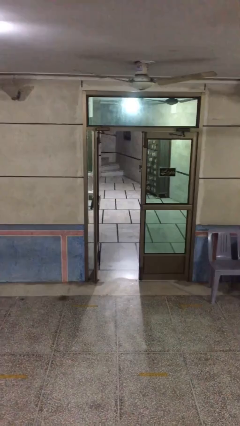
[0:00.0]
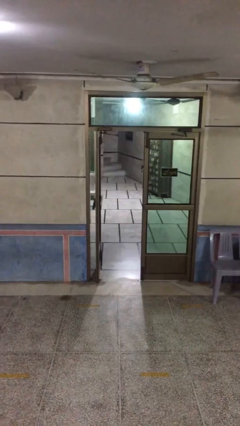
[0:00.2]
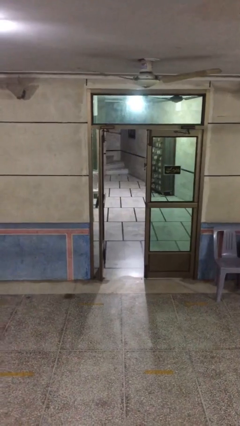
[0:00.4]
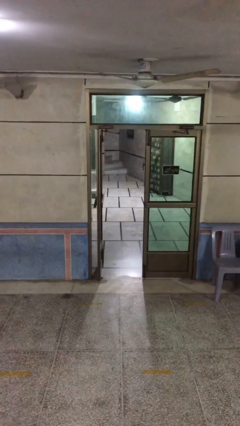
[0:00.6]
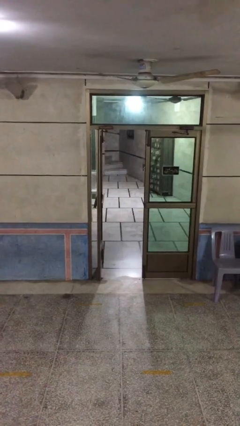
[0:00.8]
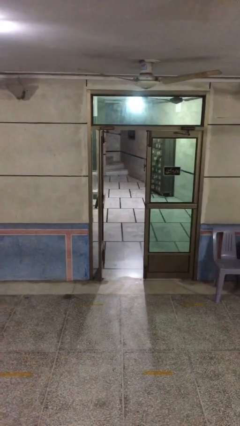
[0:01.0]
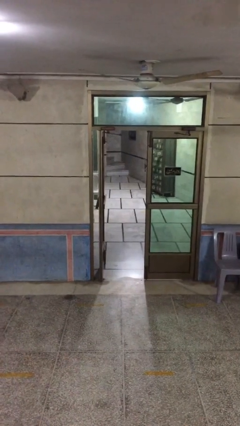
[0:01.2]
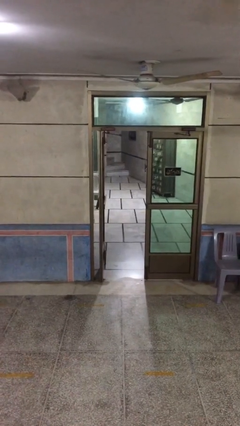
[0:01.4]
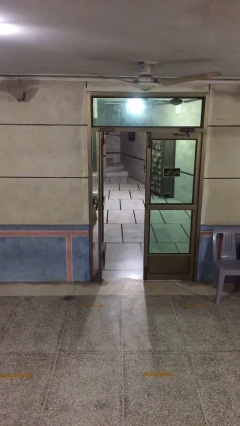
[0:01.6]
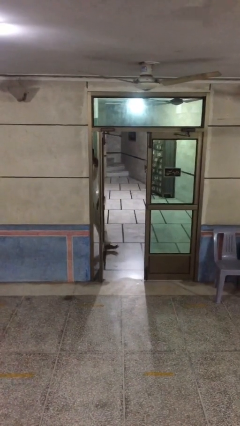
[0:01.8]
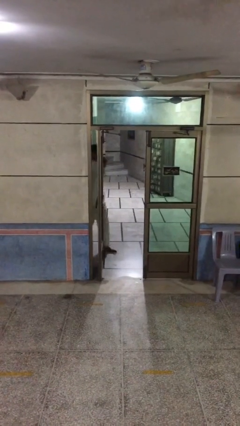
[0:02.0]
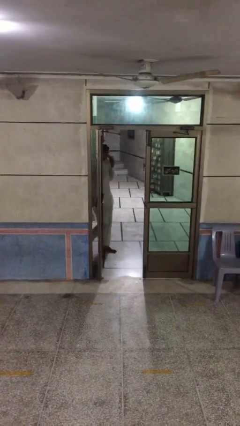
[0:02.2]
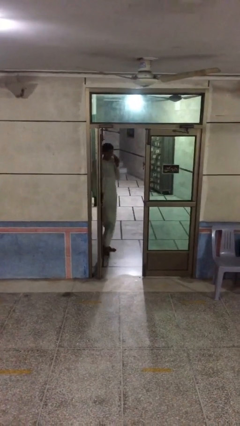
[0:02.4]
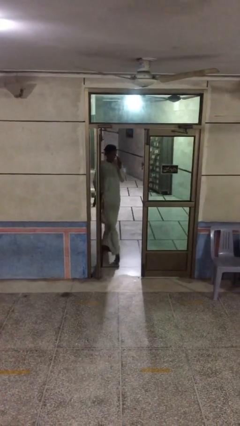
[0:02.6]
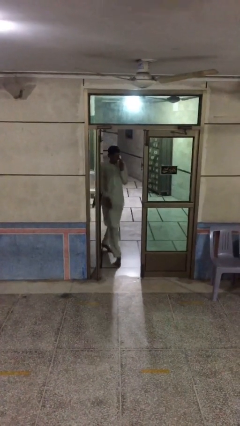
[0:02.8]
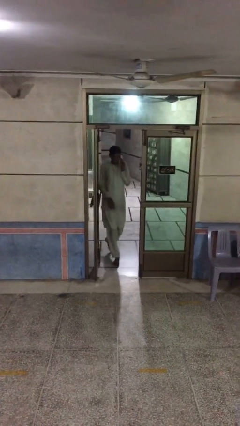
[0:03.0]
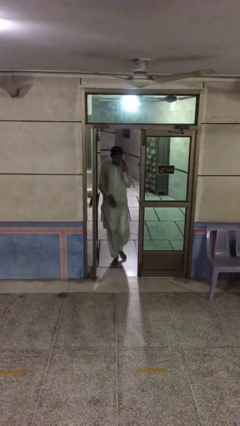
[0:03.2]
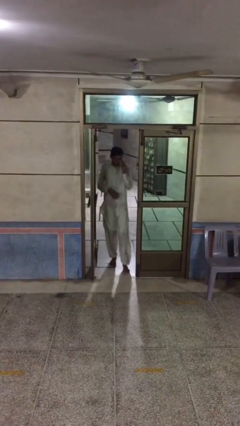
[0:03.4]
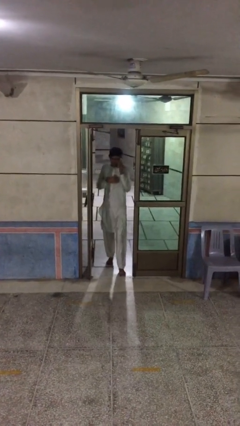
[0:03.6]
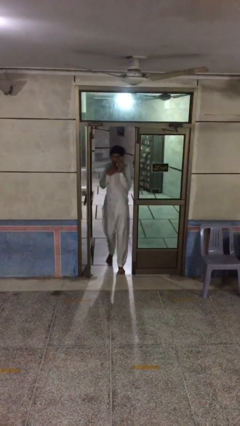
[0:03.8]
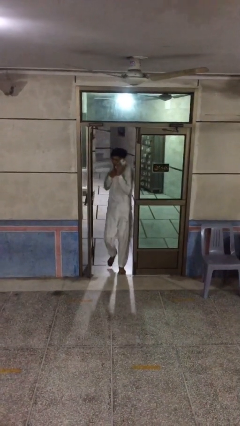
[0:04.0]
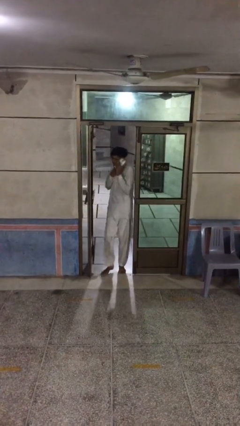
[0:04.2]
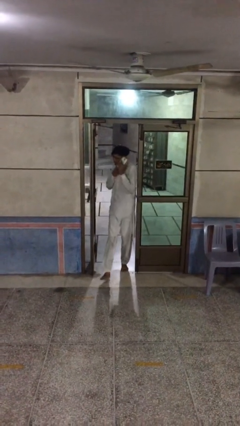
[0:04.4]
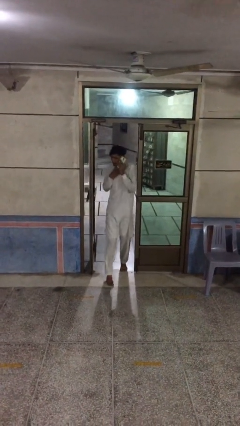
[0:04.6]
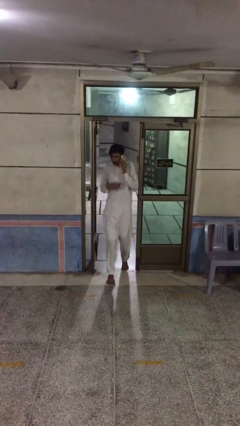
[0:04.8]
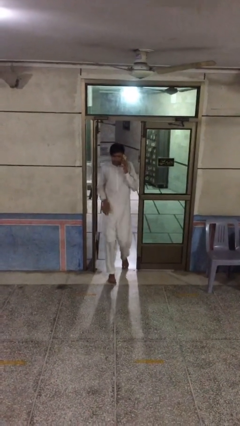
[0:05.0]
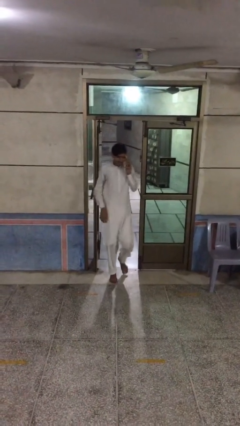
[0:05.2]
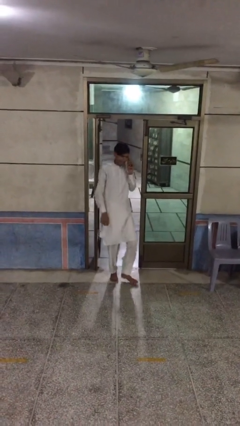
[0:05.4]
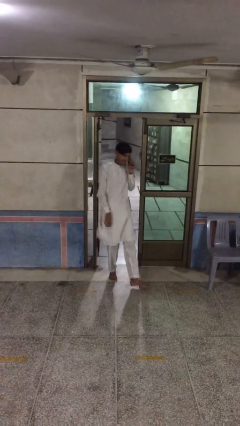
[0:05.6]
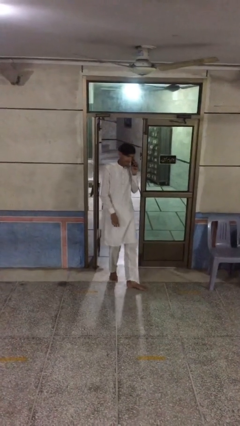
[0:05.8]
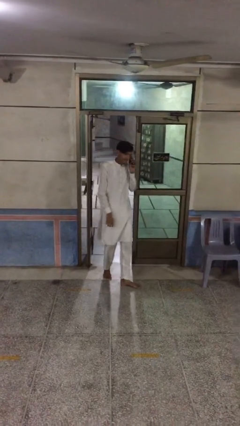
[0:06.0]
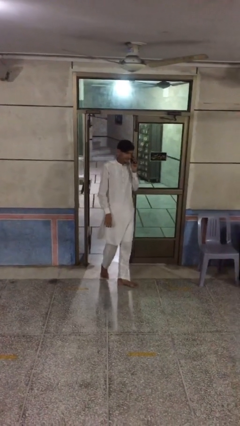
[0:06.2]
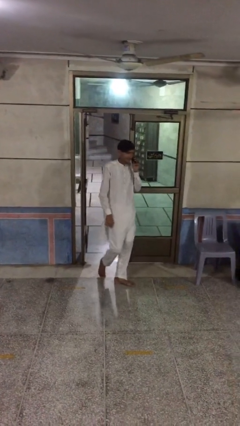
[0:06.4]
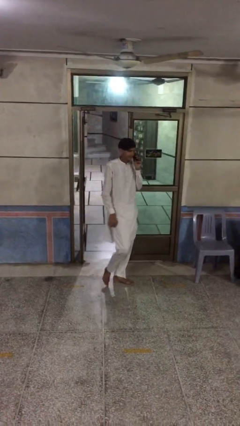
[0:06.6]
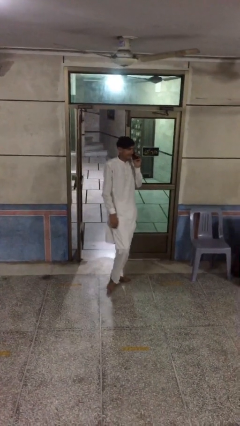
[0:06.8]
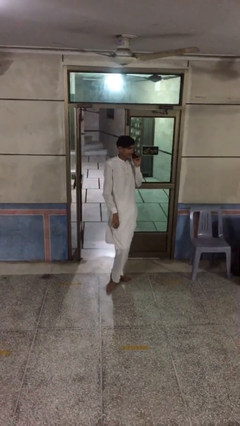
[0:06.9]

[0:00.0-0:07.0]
person enters scene through structure

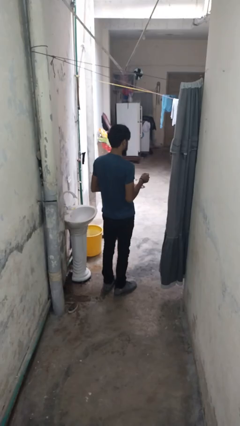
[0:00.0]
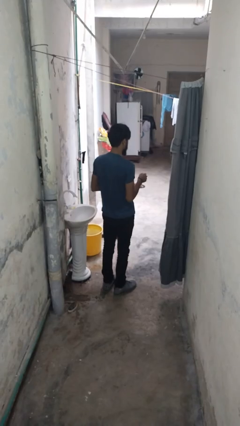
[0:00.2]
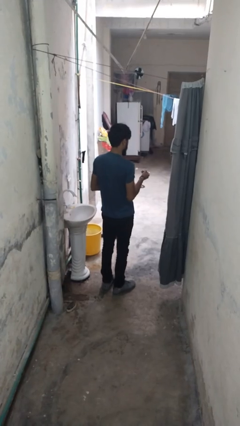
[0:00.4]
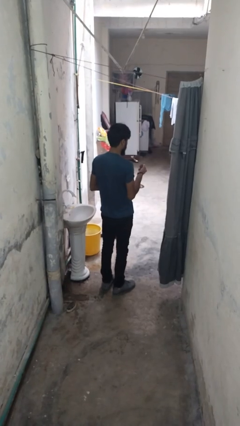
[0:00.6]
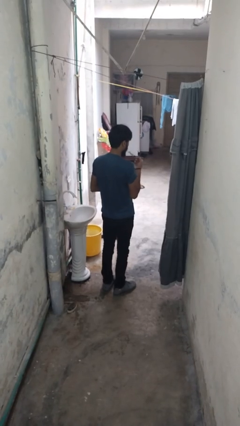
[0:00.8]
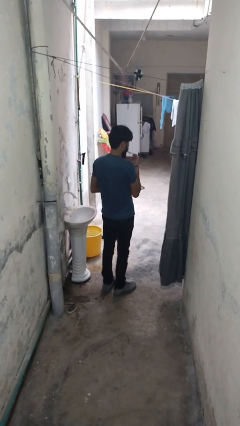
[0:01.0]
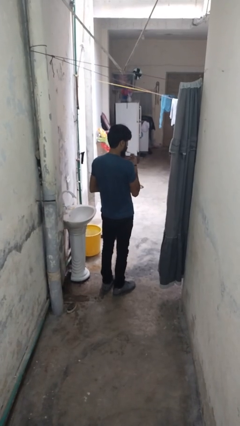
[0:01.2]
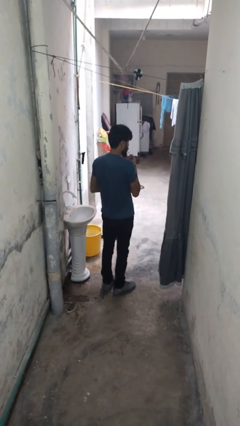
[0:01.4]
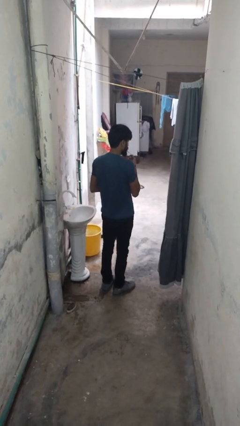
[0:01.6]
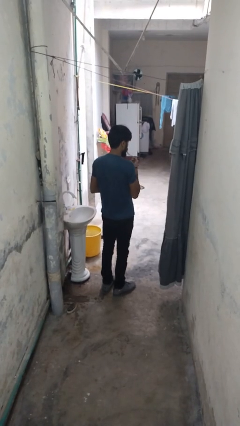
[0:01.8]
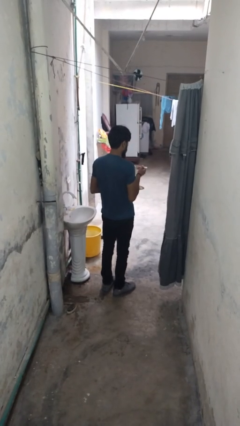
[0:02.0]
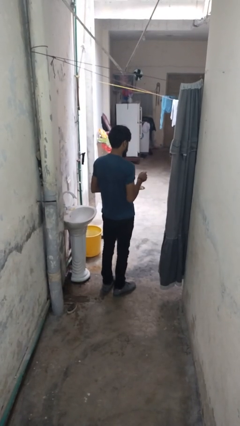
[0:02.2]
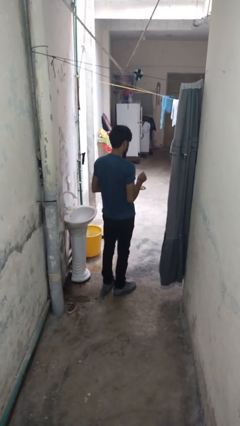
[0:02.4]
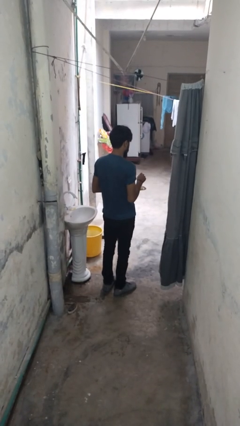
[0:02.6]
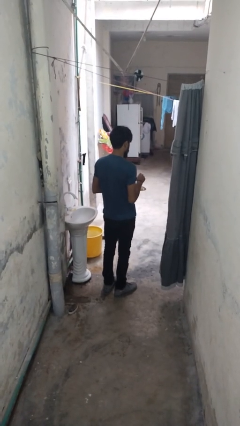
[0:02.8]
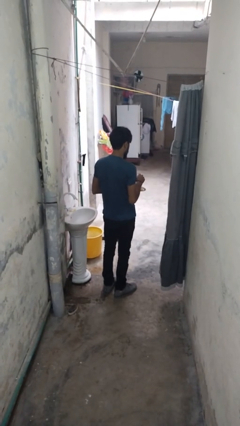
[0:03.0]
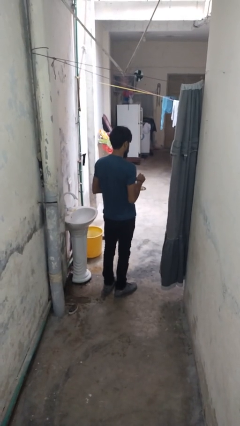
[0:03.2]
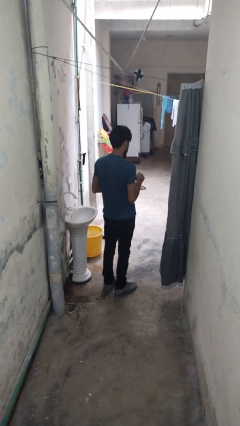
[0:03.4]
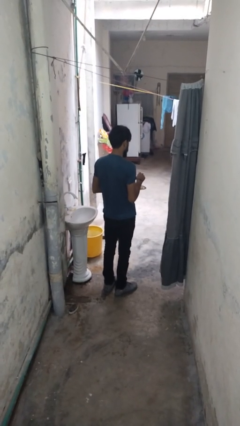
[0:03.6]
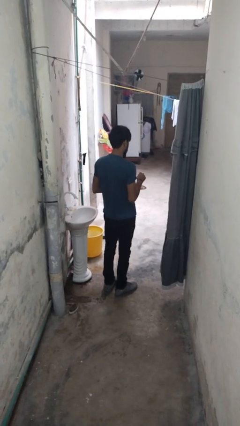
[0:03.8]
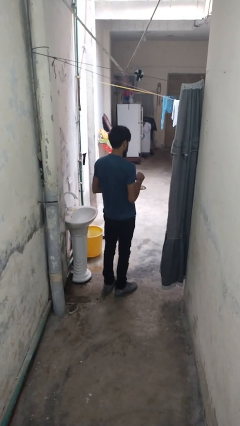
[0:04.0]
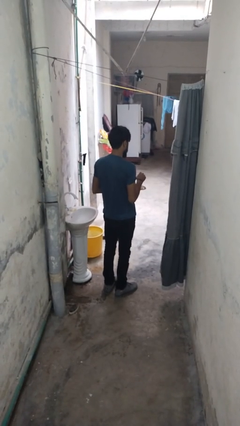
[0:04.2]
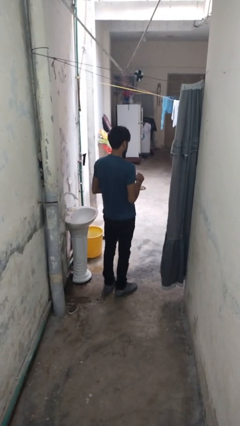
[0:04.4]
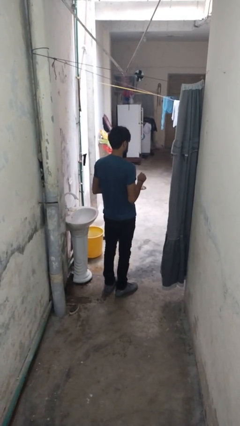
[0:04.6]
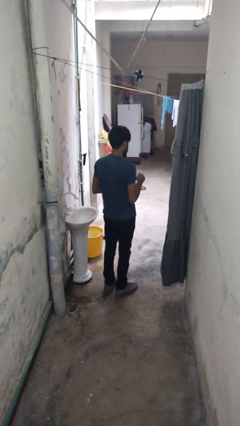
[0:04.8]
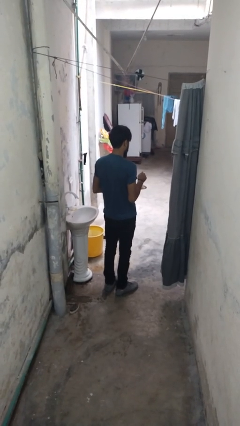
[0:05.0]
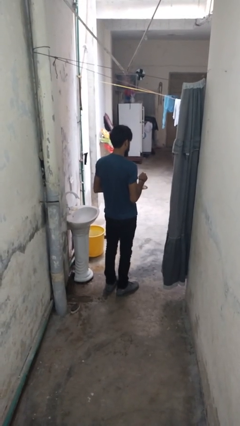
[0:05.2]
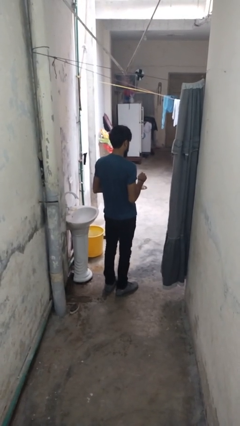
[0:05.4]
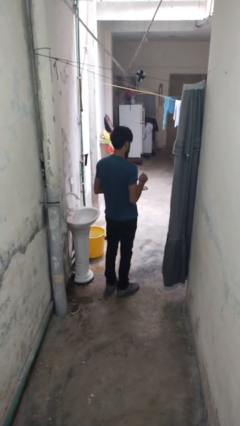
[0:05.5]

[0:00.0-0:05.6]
person eats with utensil

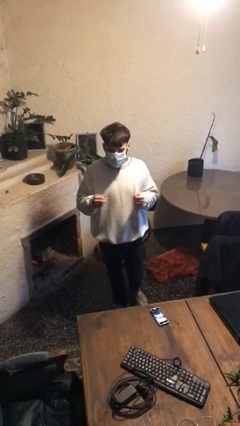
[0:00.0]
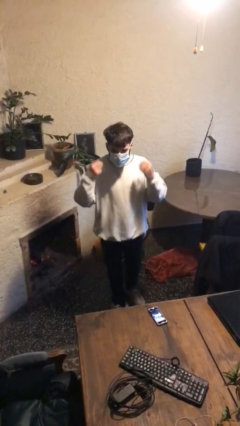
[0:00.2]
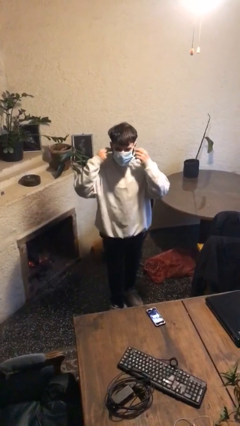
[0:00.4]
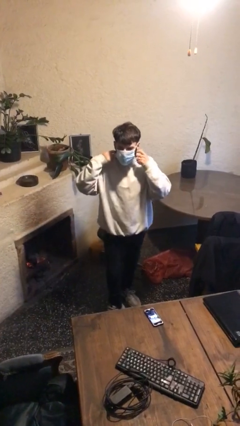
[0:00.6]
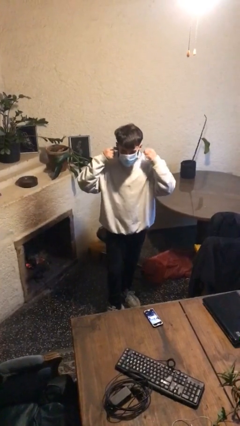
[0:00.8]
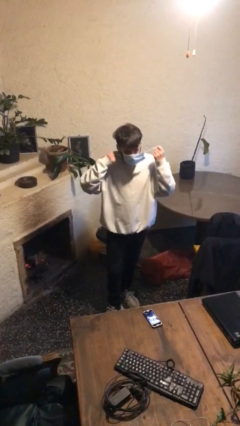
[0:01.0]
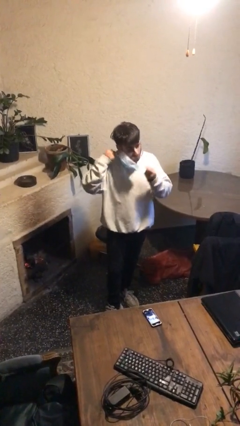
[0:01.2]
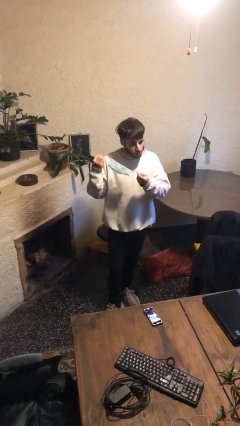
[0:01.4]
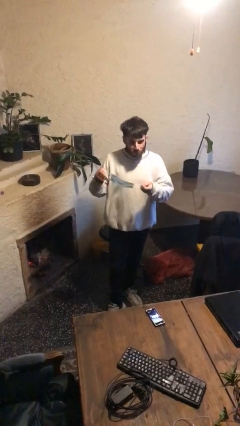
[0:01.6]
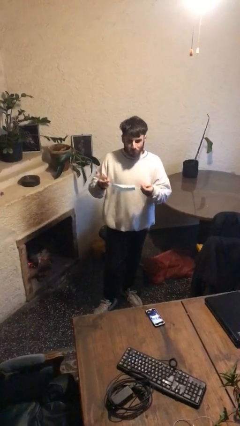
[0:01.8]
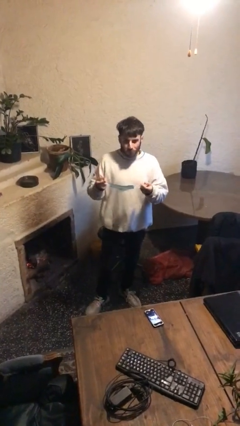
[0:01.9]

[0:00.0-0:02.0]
person takes off facemask

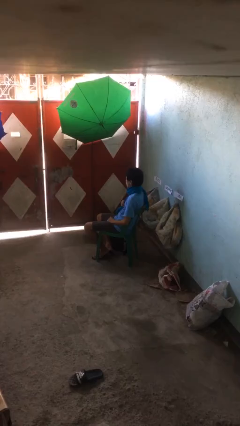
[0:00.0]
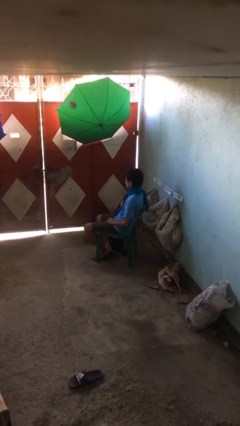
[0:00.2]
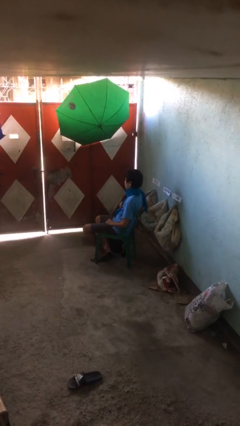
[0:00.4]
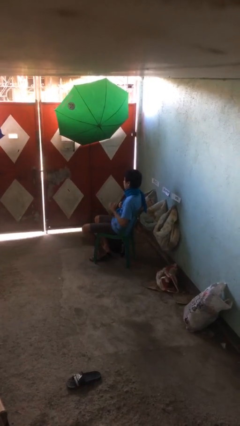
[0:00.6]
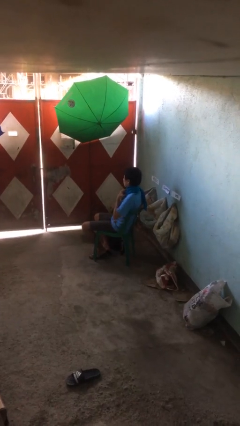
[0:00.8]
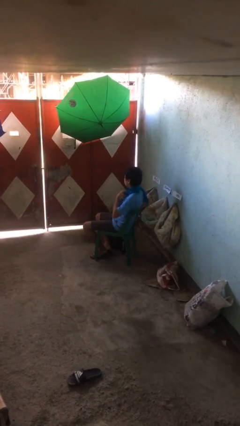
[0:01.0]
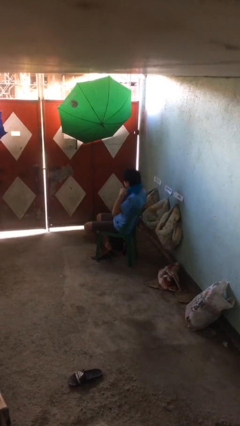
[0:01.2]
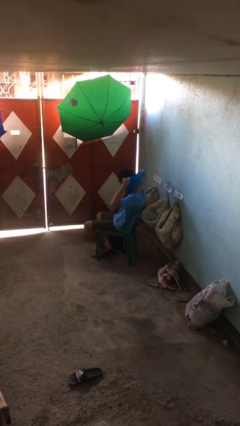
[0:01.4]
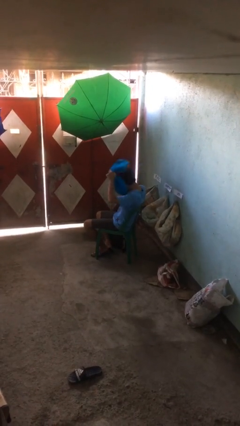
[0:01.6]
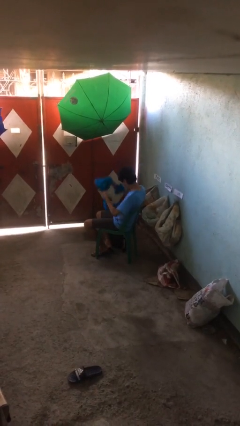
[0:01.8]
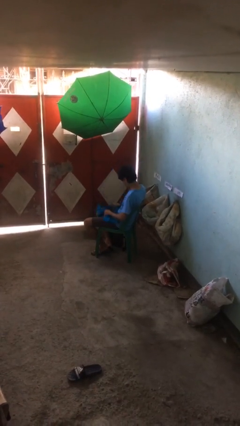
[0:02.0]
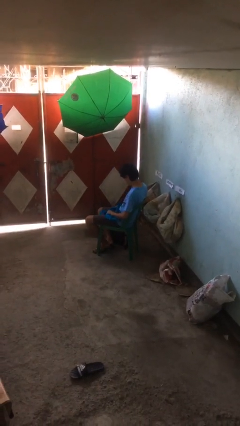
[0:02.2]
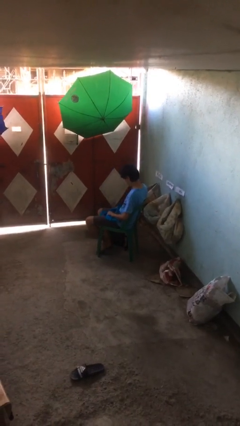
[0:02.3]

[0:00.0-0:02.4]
person takes off scarf

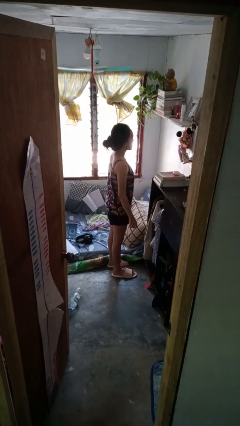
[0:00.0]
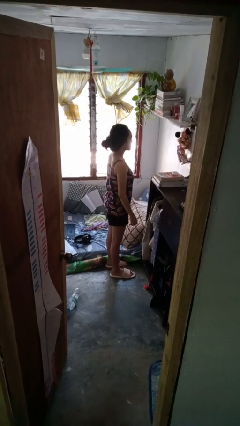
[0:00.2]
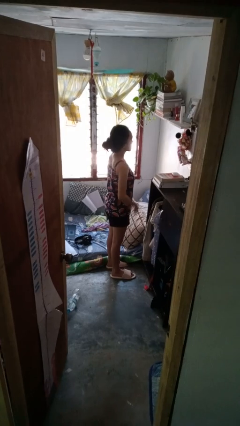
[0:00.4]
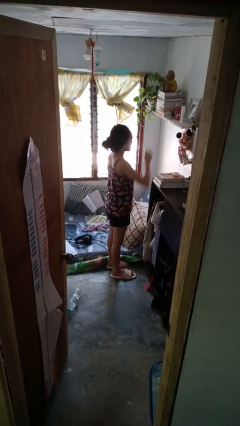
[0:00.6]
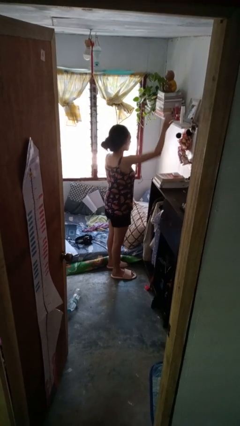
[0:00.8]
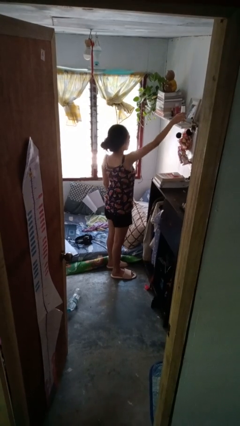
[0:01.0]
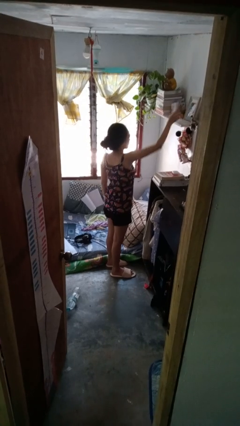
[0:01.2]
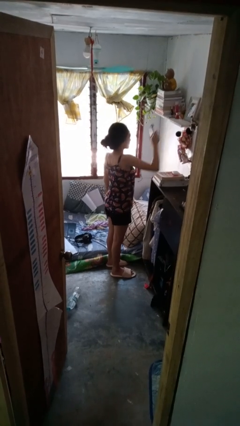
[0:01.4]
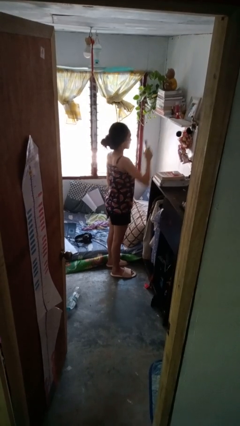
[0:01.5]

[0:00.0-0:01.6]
person picks up object from shelf
